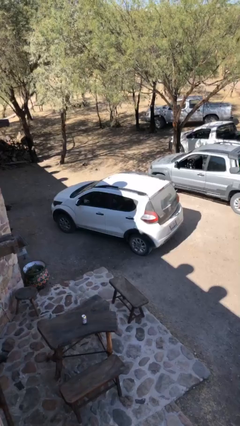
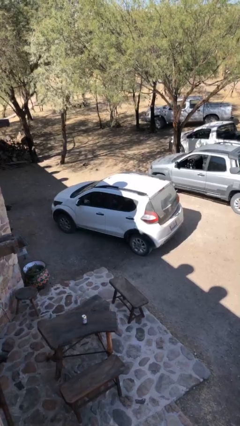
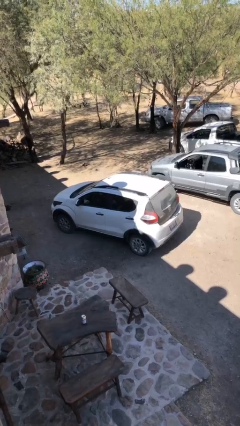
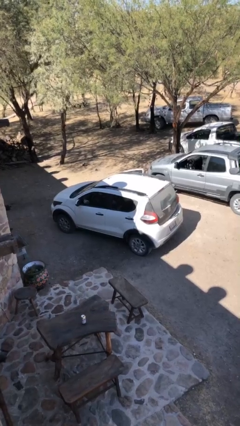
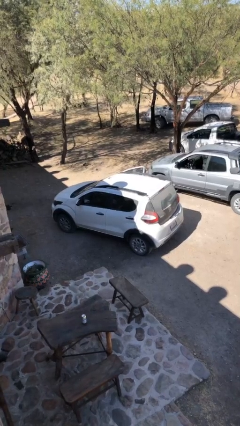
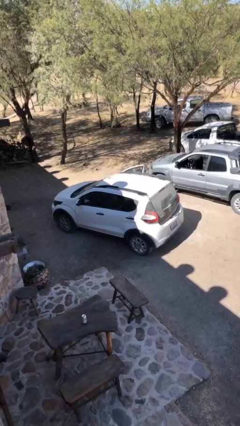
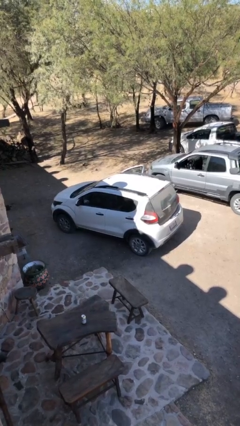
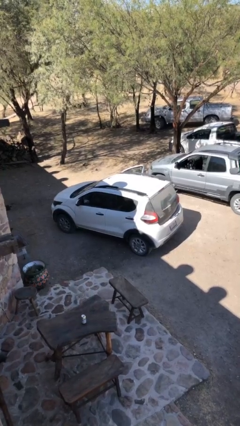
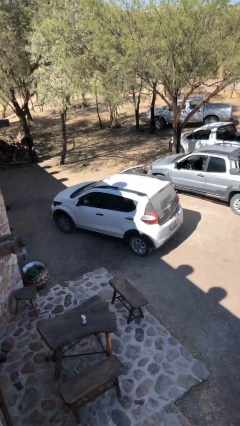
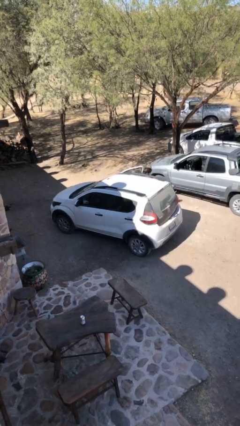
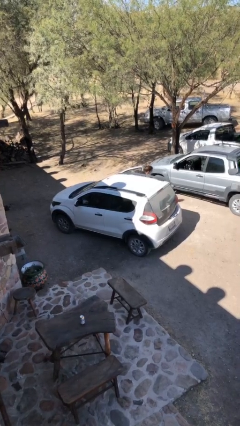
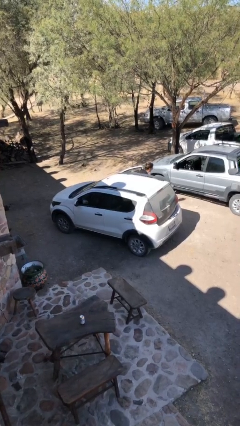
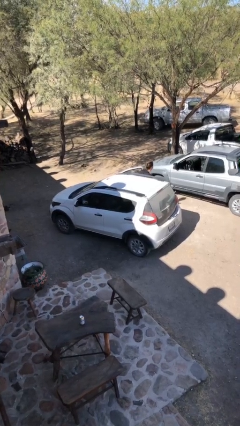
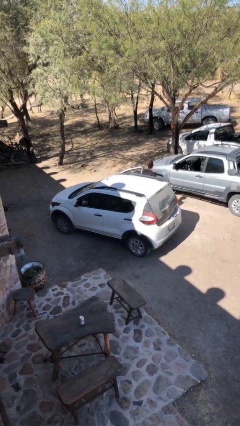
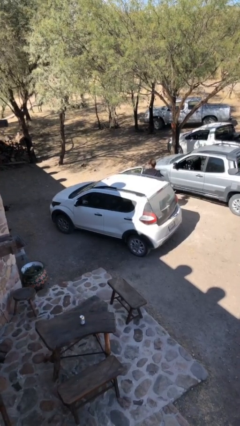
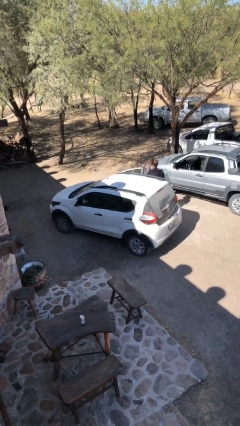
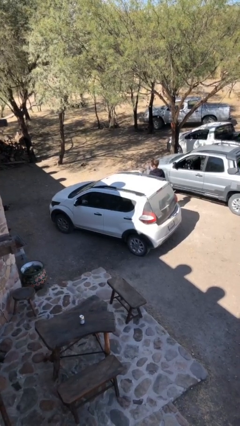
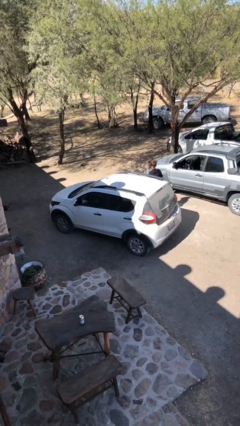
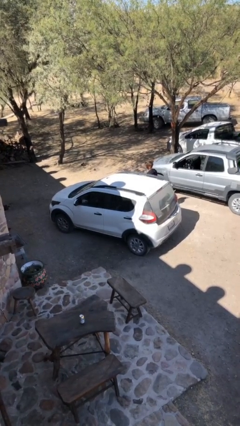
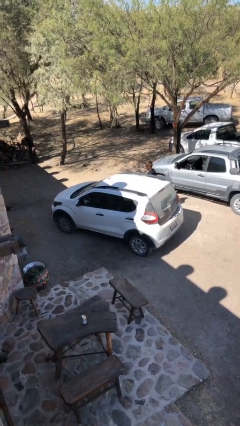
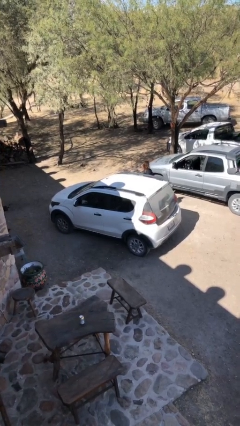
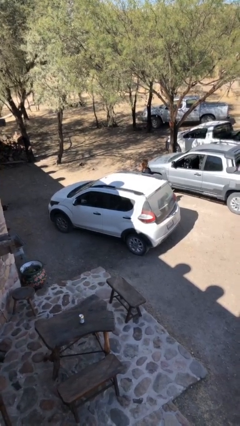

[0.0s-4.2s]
car drops off person

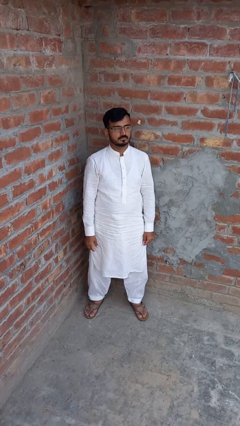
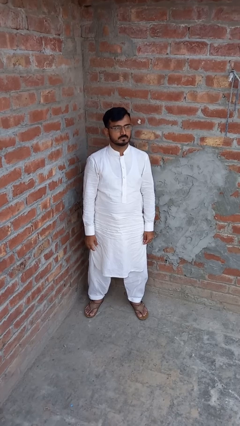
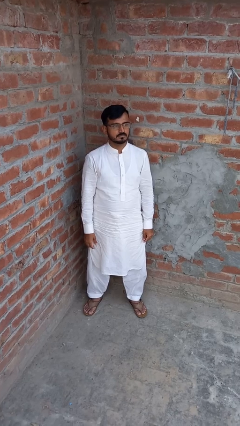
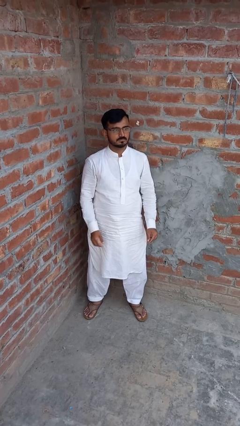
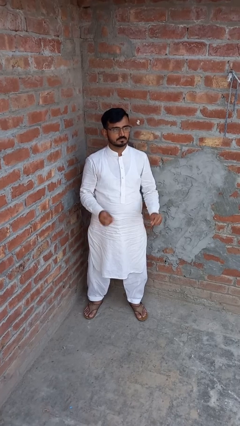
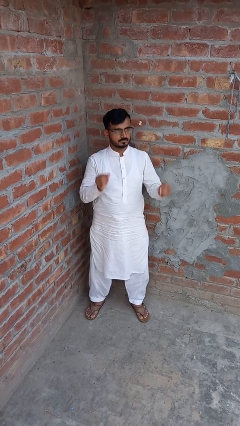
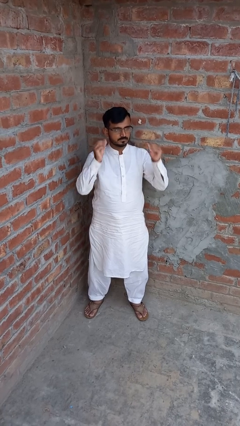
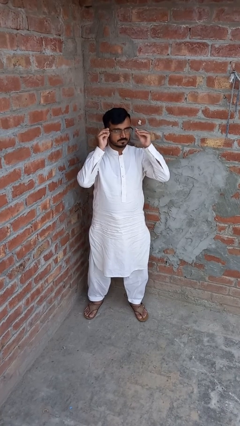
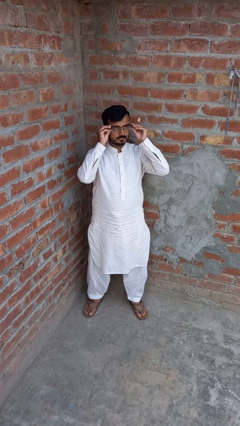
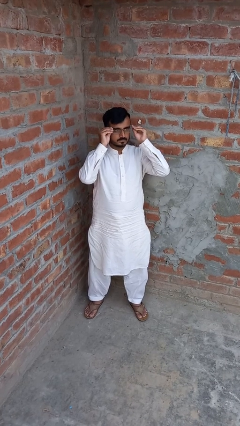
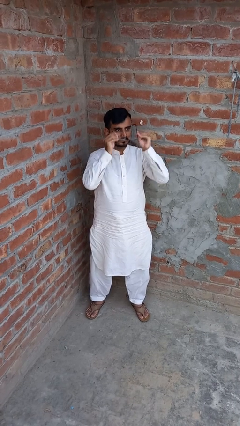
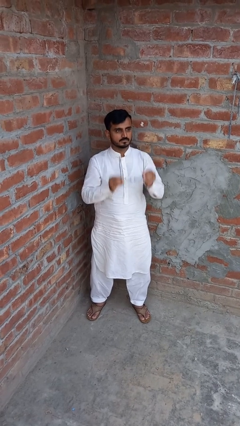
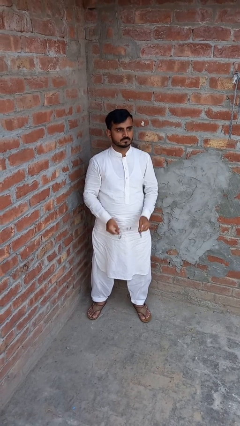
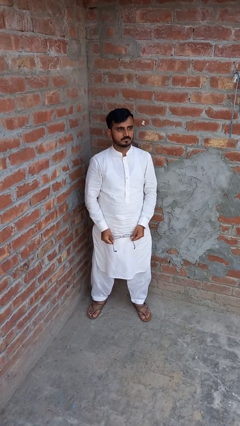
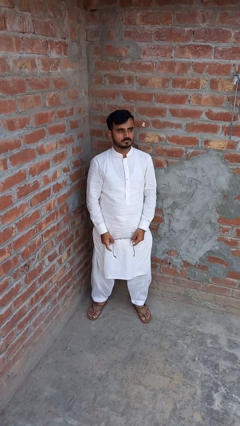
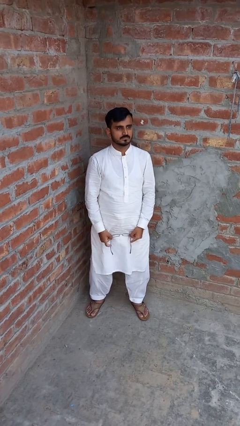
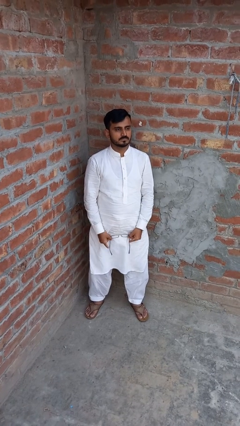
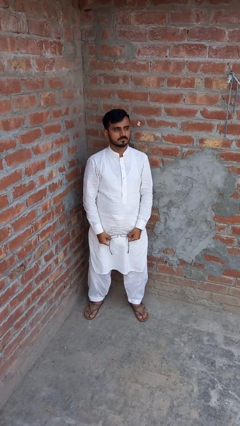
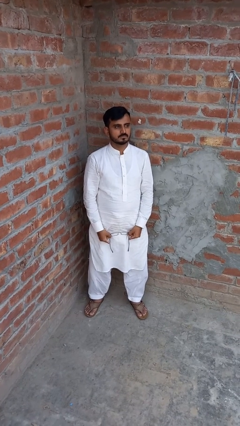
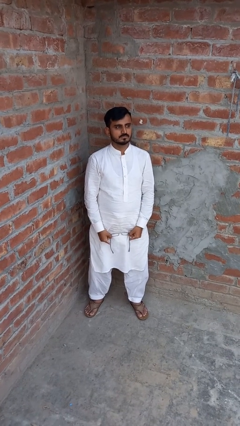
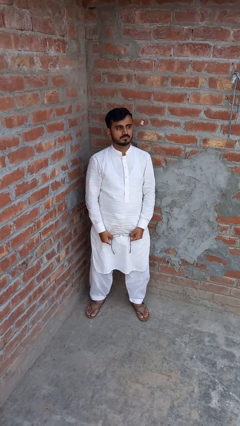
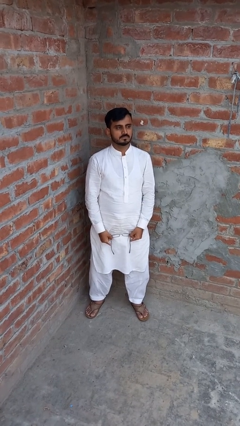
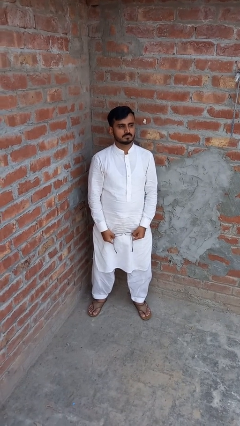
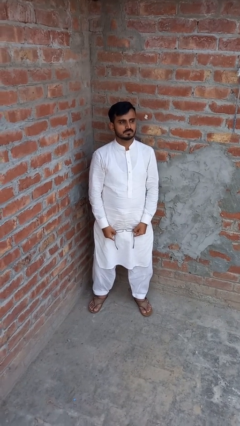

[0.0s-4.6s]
person takes off glasses

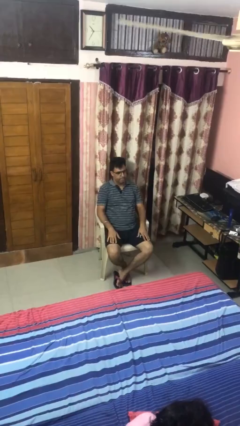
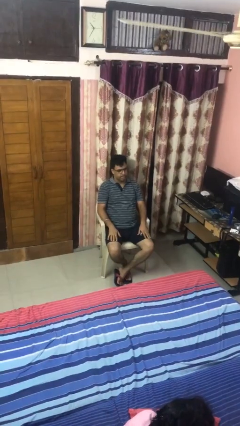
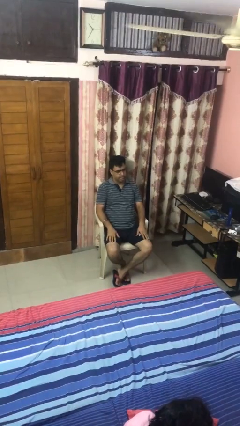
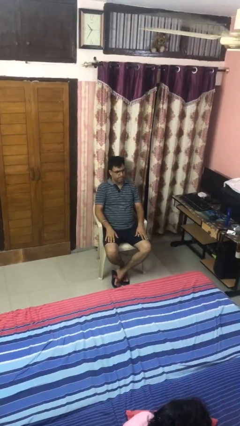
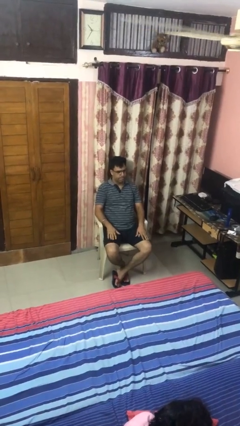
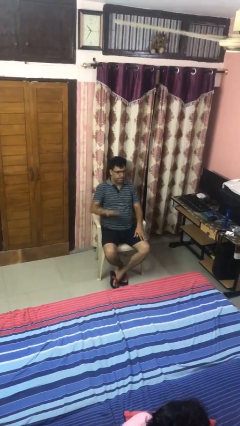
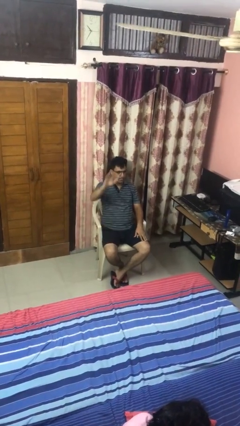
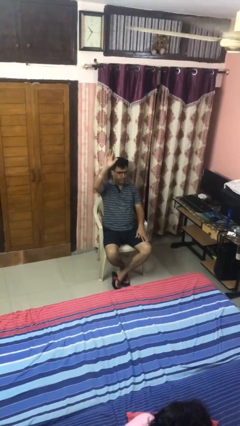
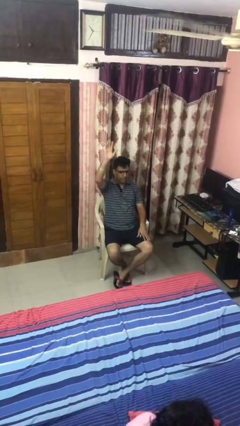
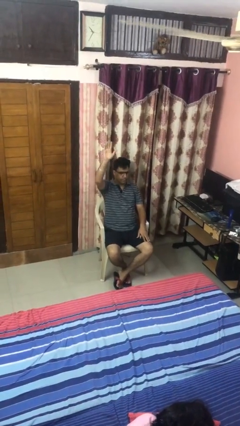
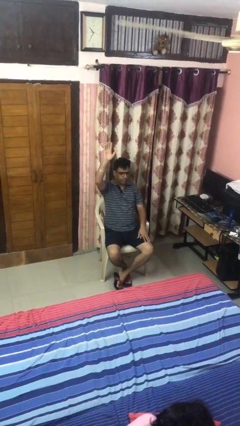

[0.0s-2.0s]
person gestures raise hand

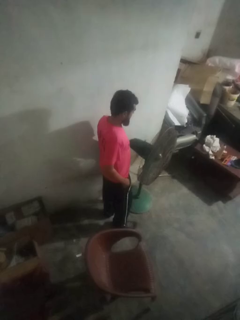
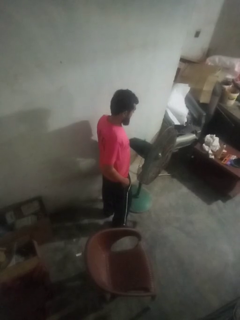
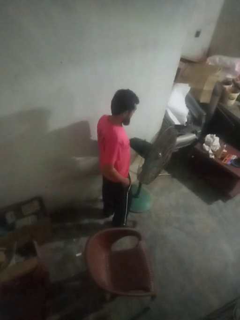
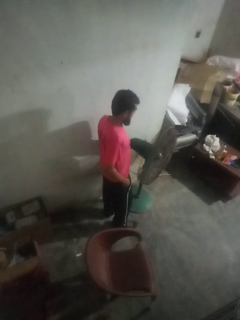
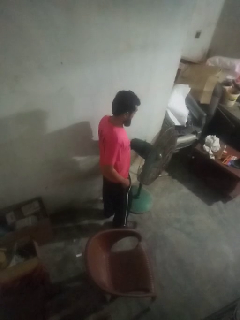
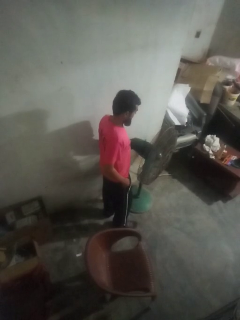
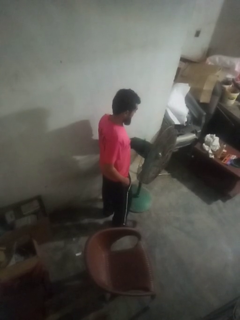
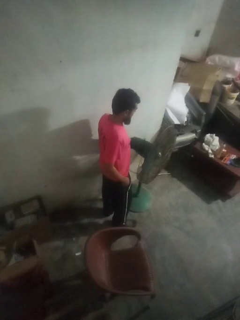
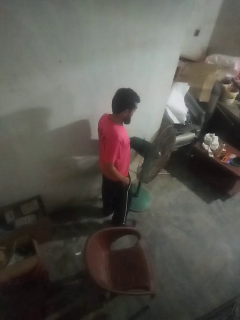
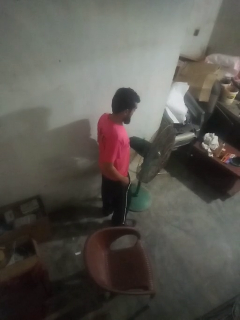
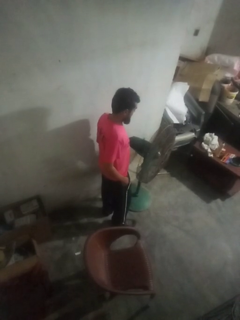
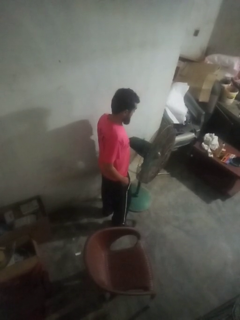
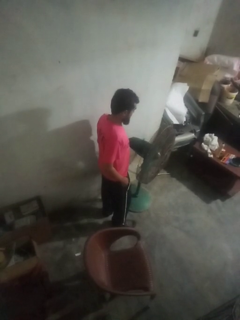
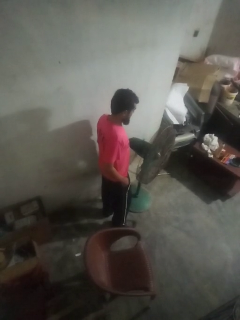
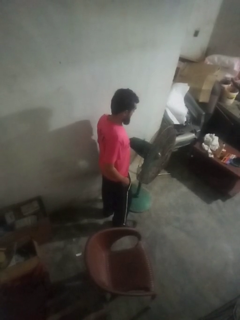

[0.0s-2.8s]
person turns on fan

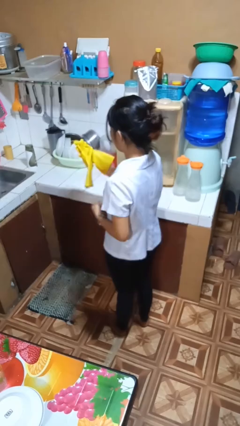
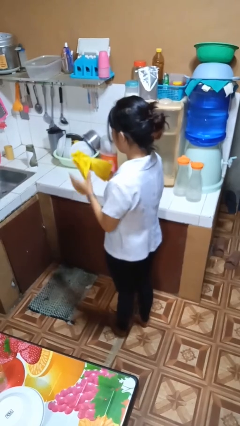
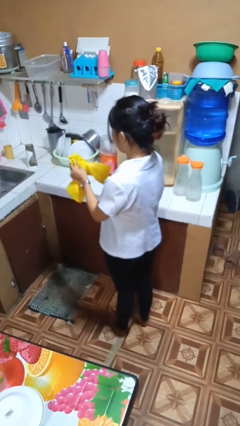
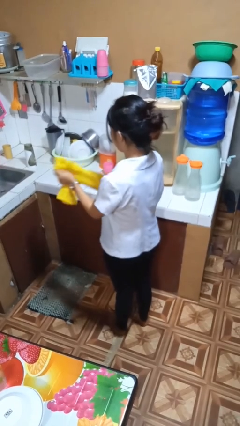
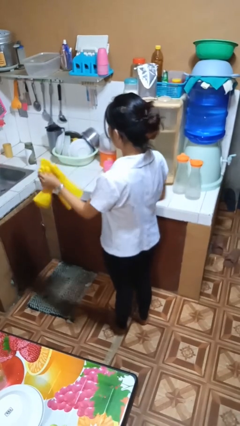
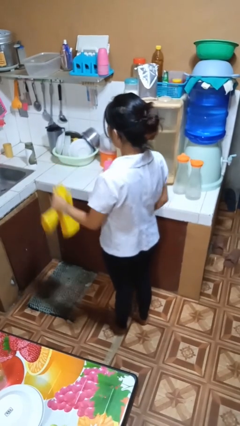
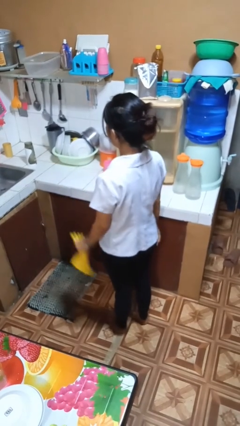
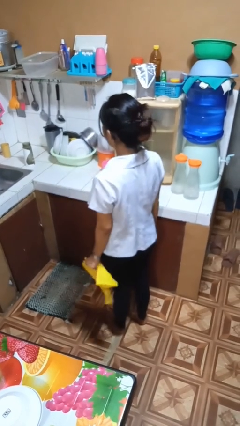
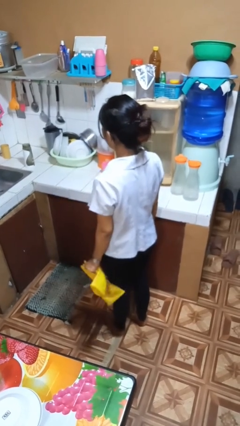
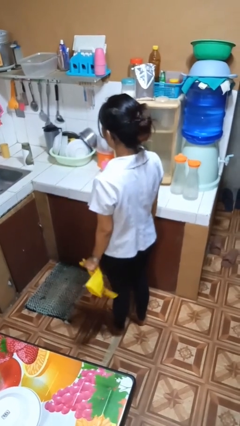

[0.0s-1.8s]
person takes off gloves

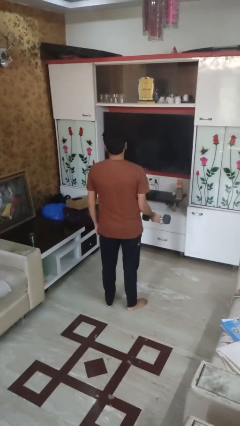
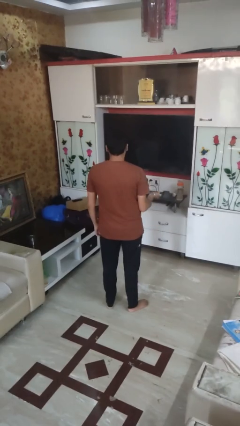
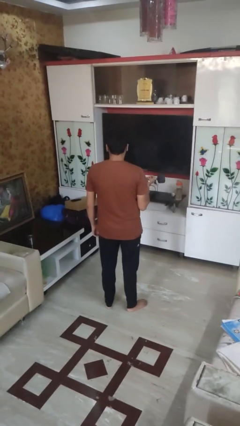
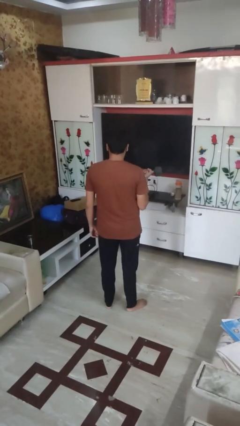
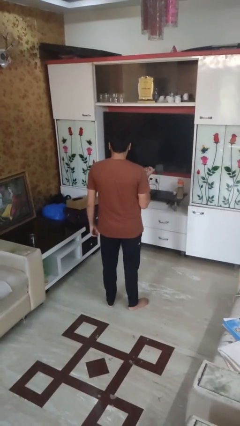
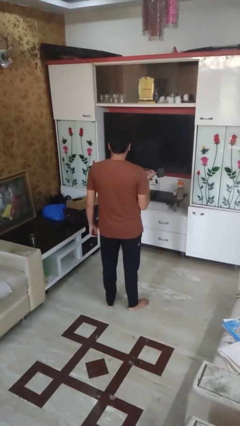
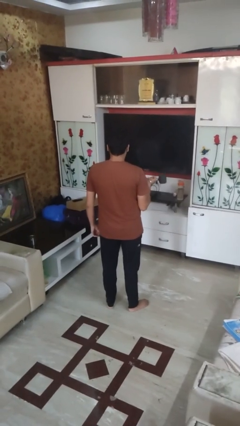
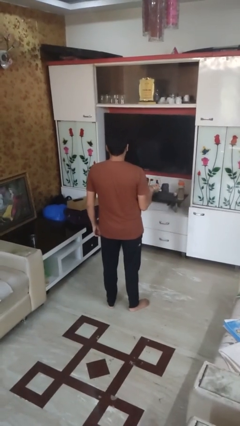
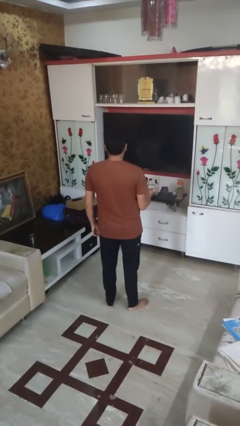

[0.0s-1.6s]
person lifts dumbbells

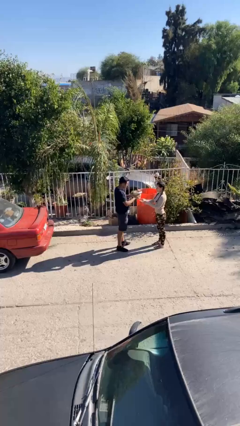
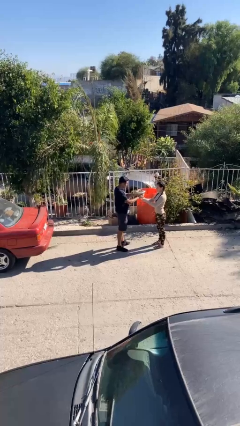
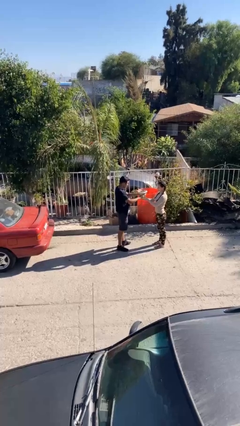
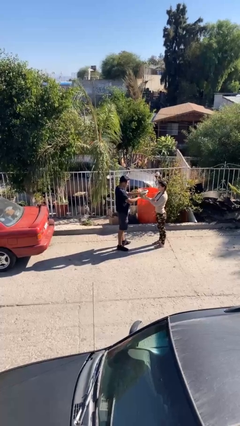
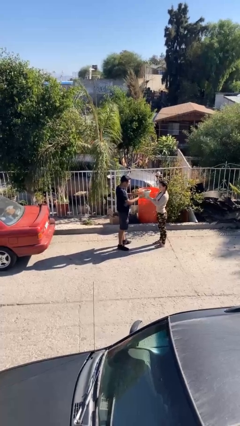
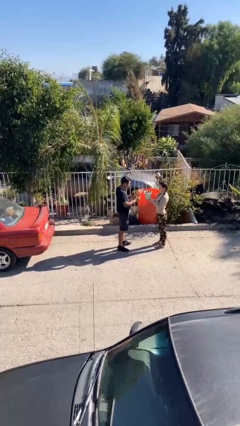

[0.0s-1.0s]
person transfers object to person
